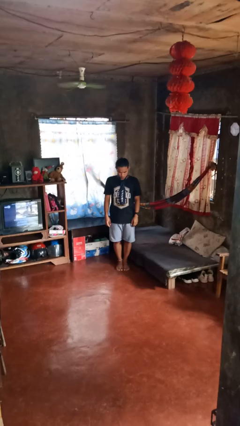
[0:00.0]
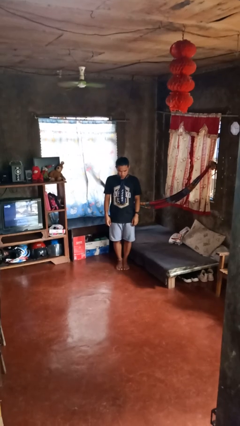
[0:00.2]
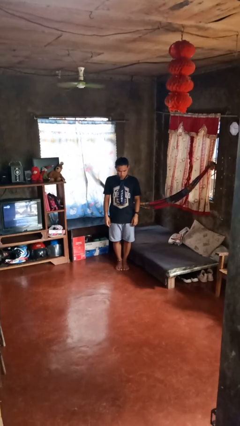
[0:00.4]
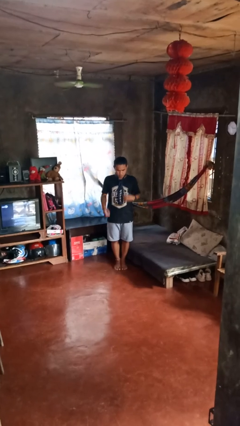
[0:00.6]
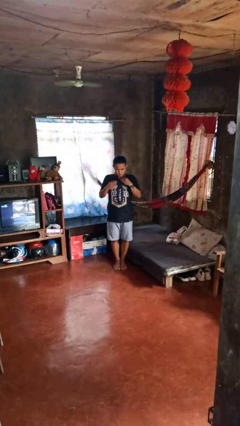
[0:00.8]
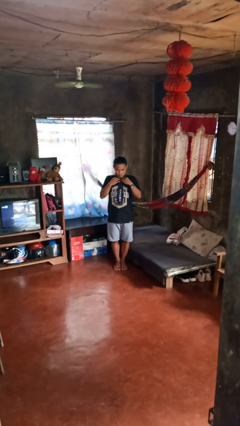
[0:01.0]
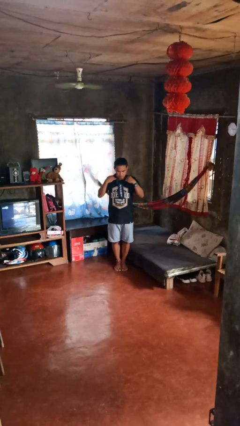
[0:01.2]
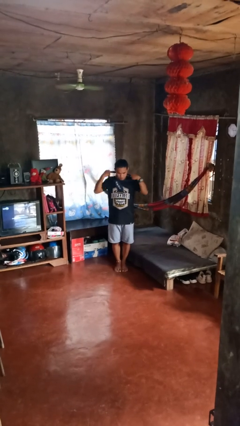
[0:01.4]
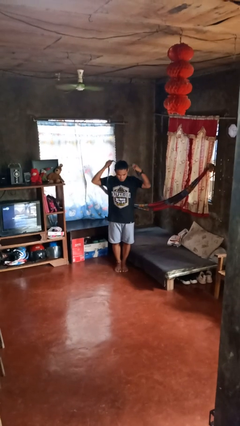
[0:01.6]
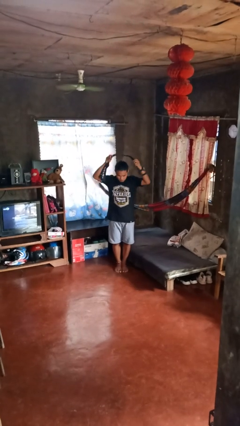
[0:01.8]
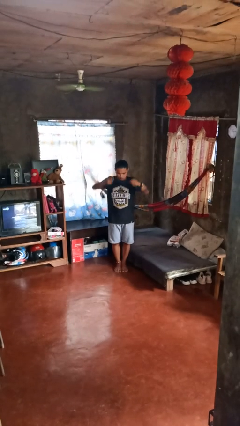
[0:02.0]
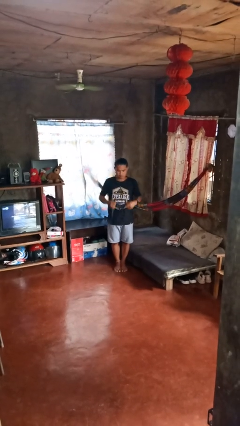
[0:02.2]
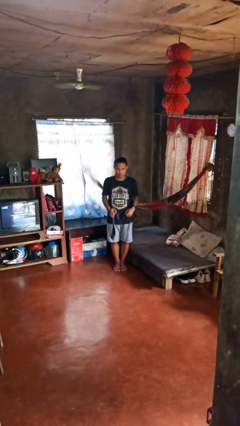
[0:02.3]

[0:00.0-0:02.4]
person dries hair with hairdryer

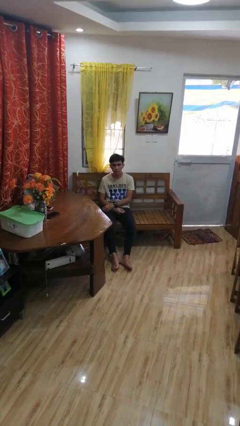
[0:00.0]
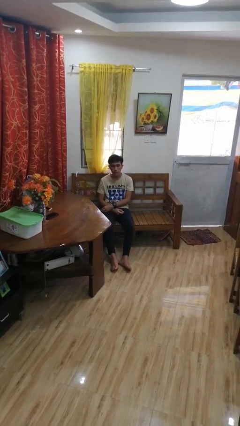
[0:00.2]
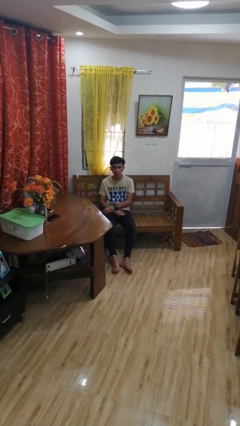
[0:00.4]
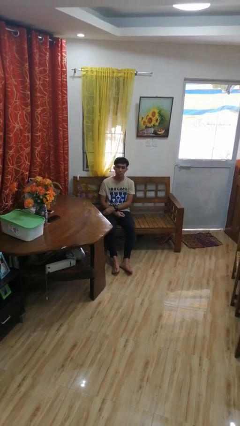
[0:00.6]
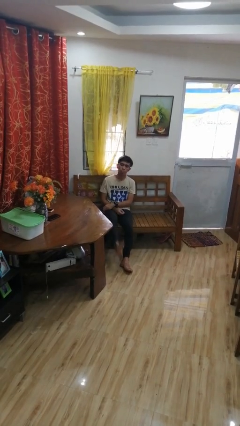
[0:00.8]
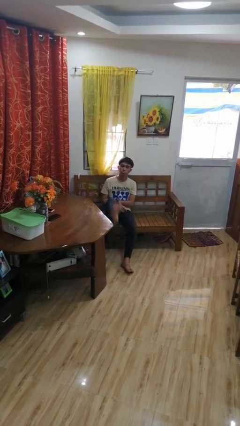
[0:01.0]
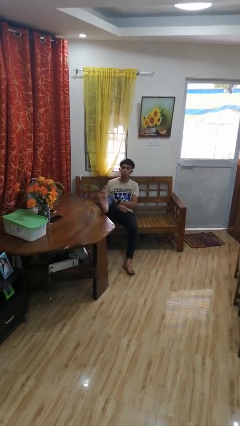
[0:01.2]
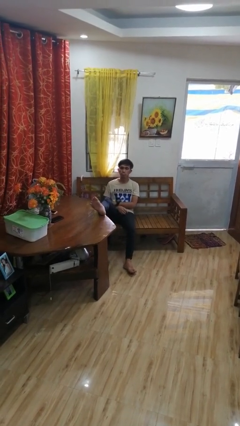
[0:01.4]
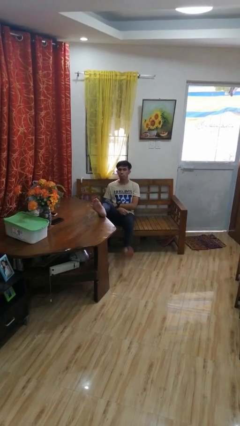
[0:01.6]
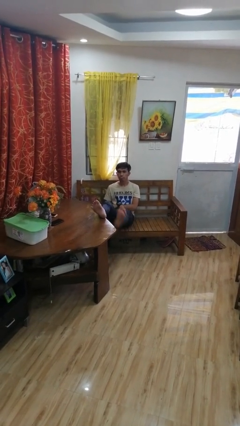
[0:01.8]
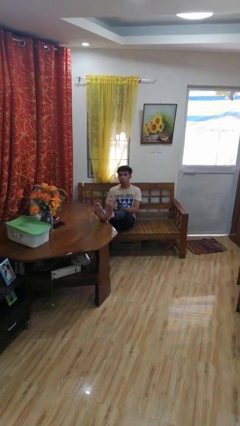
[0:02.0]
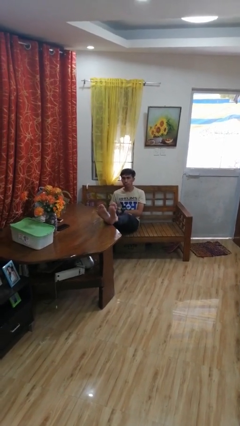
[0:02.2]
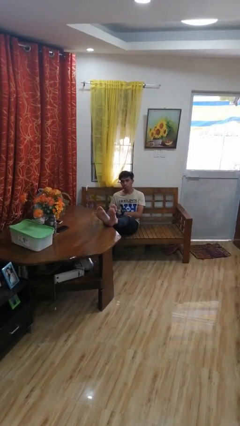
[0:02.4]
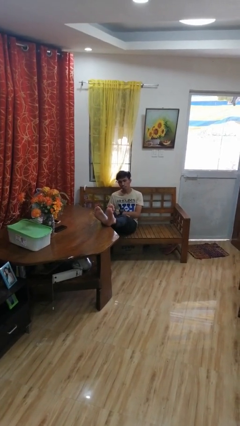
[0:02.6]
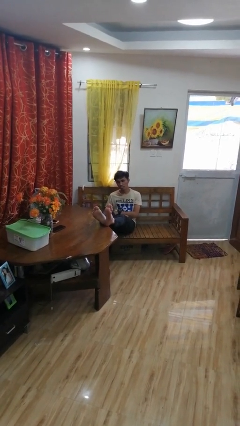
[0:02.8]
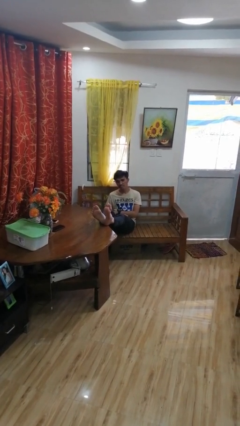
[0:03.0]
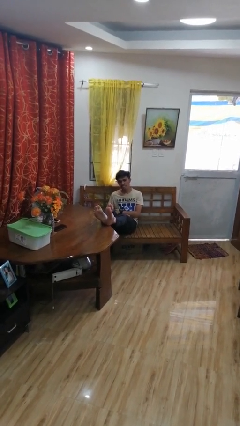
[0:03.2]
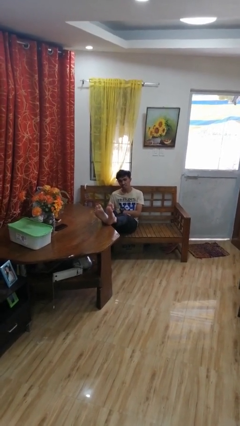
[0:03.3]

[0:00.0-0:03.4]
person puts feet up

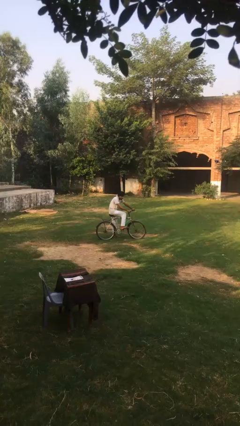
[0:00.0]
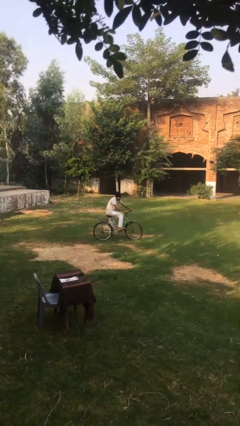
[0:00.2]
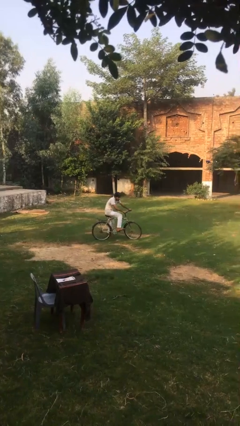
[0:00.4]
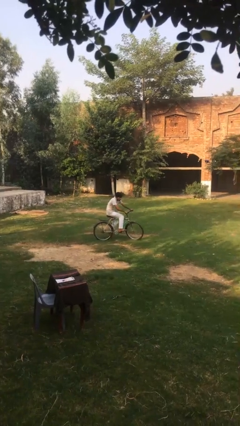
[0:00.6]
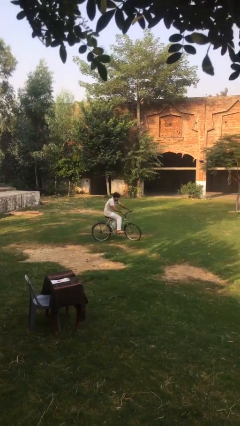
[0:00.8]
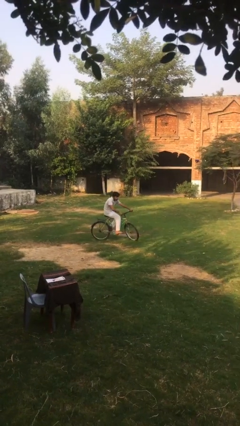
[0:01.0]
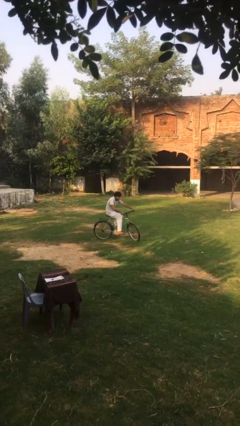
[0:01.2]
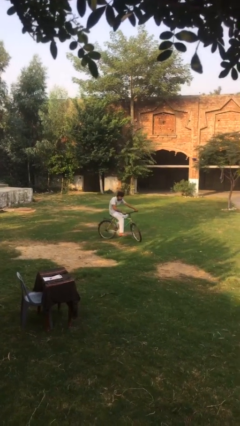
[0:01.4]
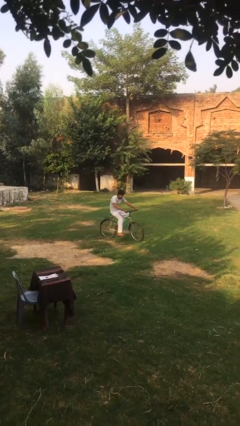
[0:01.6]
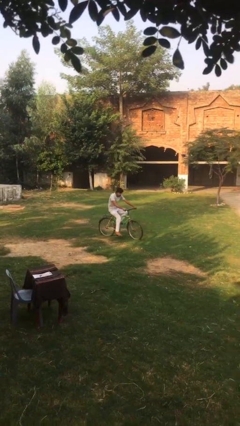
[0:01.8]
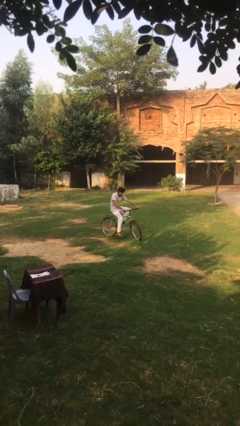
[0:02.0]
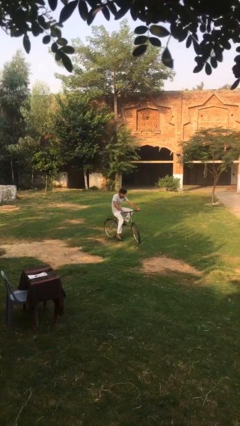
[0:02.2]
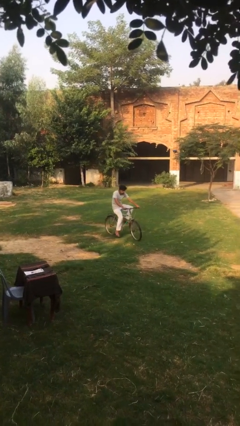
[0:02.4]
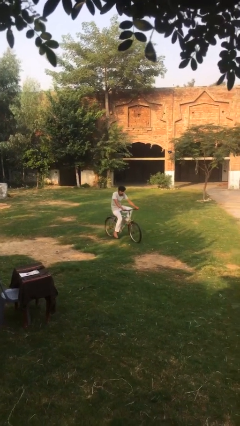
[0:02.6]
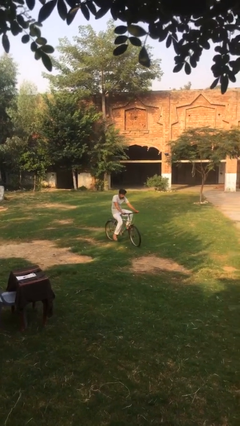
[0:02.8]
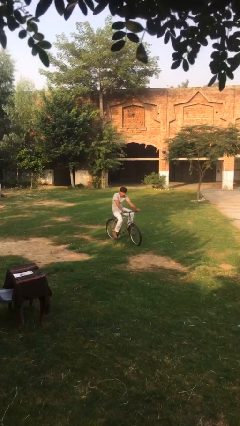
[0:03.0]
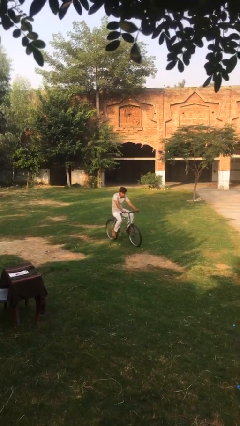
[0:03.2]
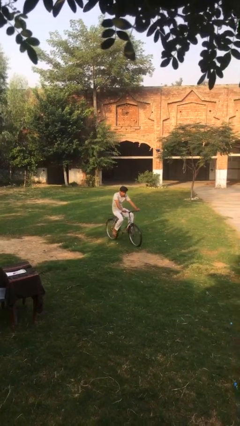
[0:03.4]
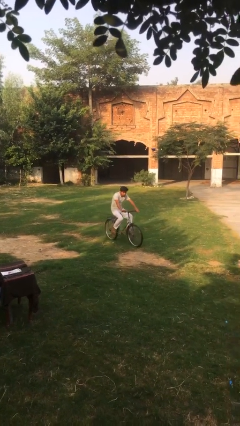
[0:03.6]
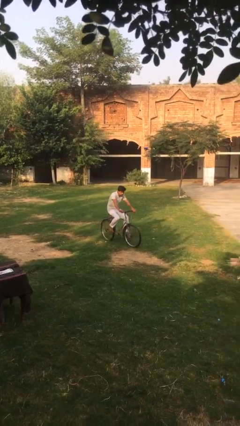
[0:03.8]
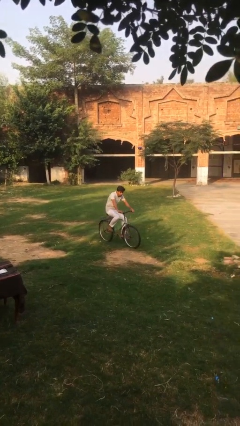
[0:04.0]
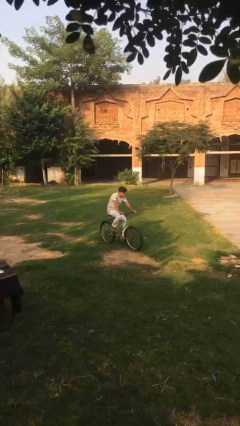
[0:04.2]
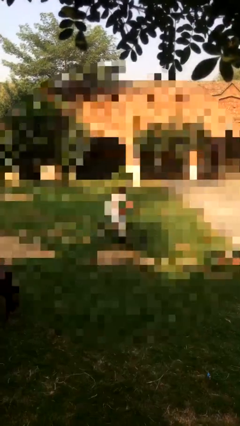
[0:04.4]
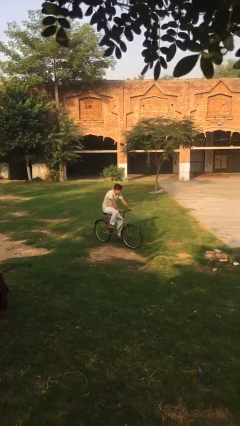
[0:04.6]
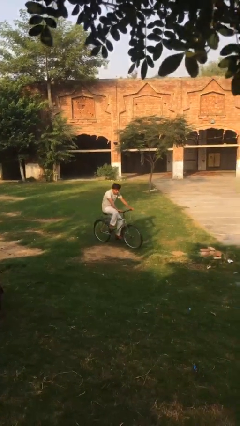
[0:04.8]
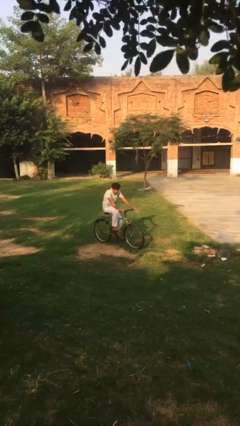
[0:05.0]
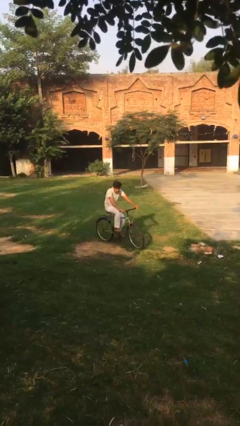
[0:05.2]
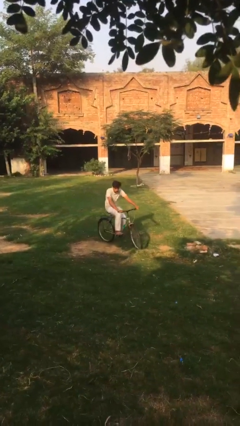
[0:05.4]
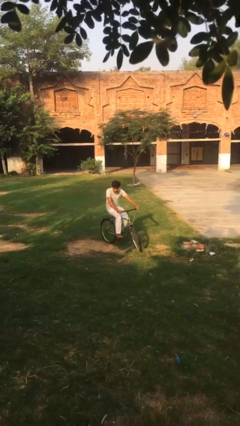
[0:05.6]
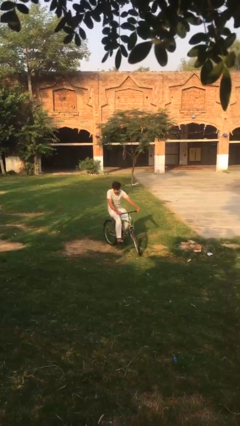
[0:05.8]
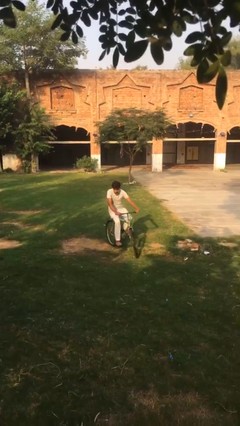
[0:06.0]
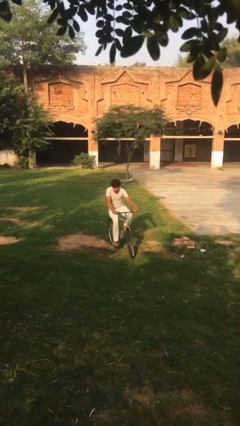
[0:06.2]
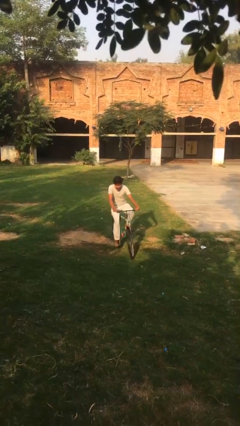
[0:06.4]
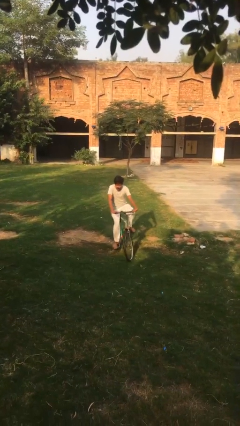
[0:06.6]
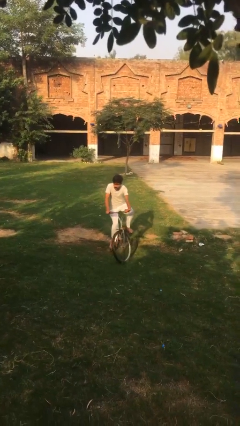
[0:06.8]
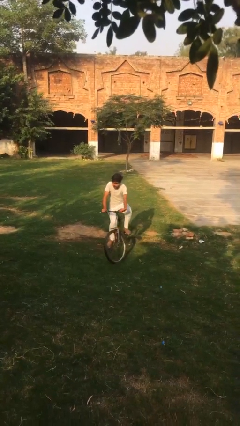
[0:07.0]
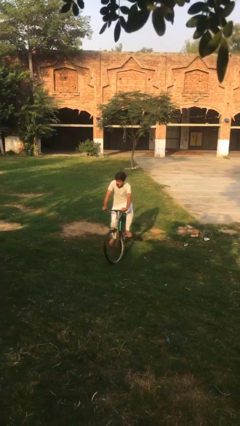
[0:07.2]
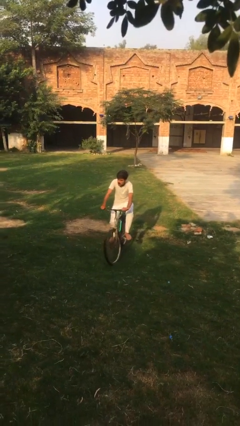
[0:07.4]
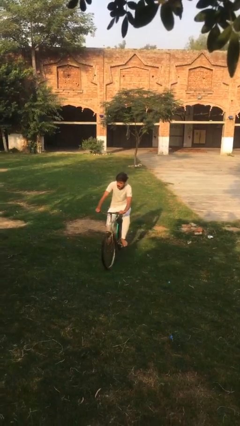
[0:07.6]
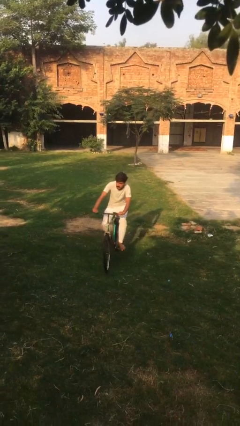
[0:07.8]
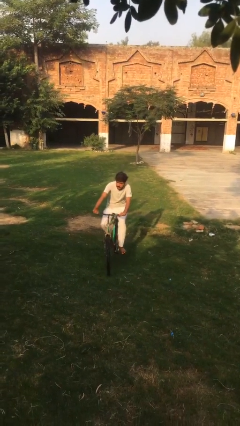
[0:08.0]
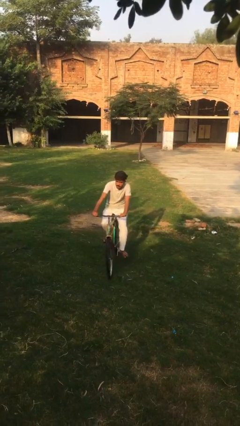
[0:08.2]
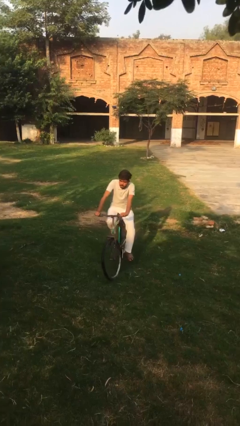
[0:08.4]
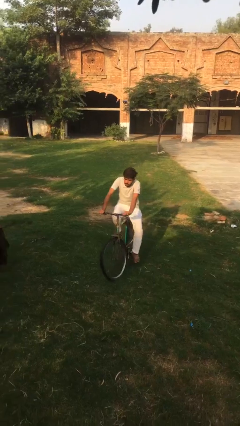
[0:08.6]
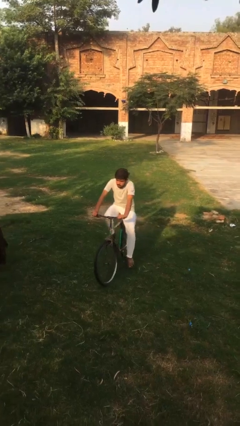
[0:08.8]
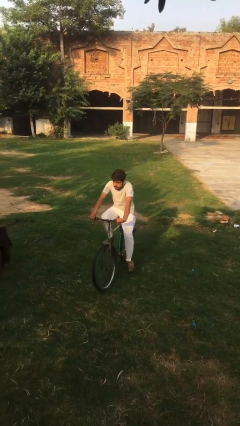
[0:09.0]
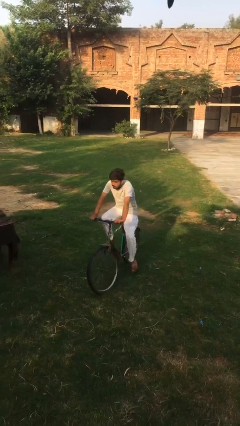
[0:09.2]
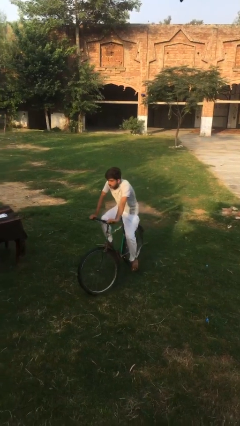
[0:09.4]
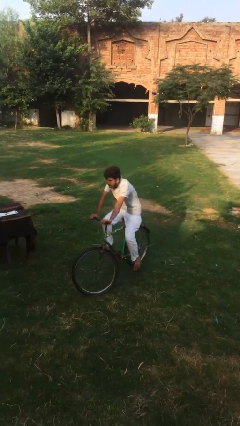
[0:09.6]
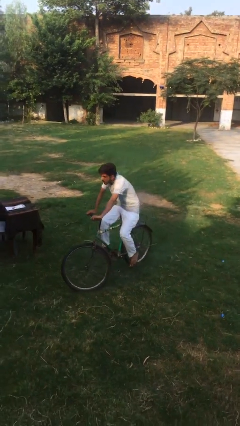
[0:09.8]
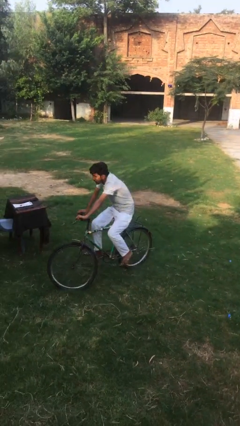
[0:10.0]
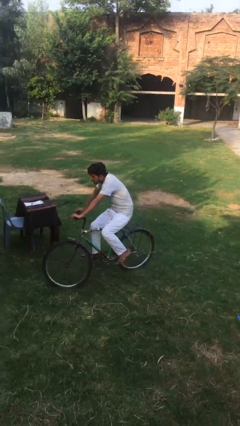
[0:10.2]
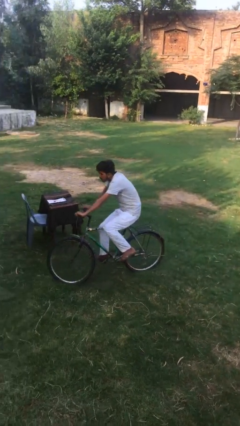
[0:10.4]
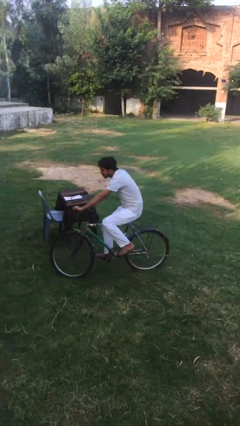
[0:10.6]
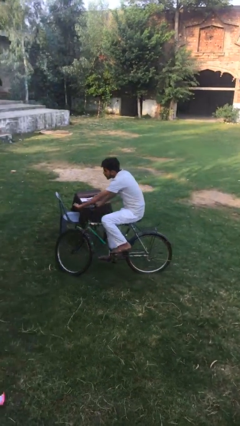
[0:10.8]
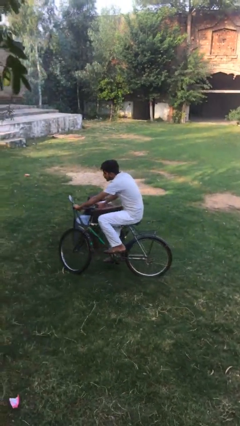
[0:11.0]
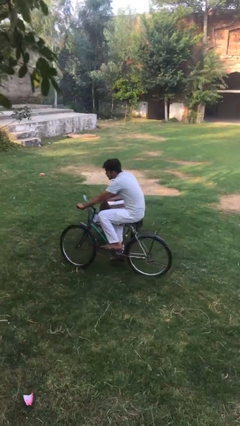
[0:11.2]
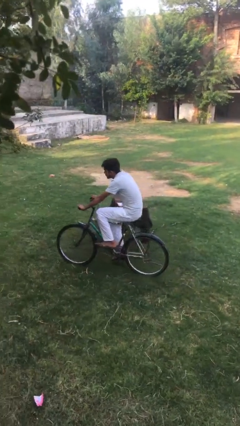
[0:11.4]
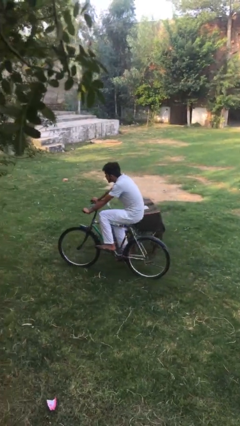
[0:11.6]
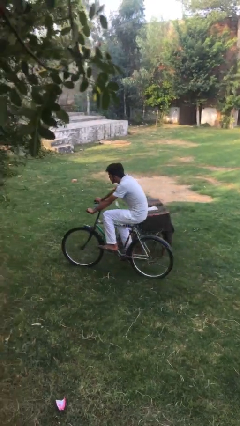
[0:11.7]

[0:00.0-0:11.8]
person rides bicycle
